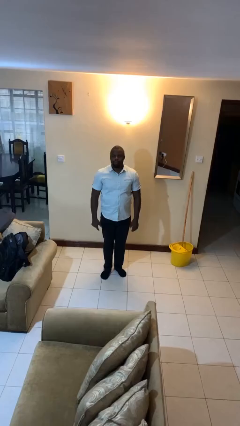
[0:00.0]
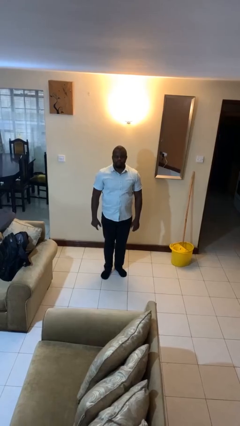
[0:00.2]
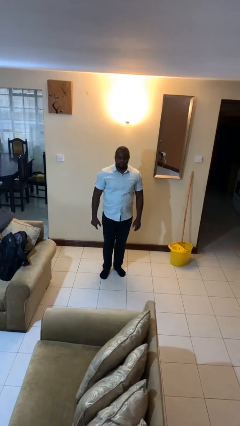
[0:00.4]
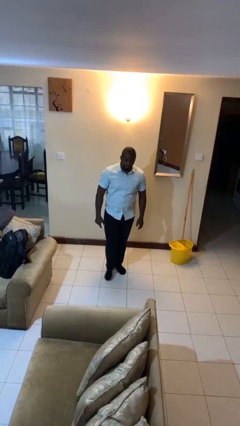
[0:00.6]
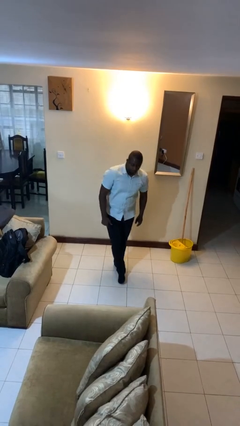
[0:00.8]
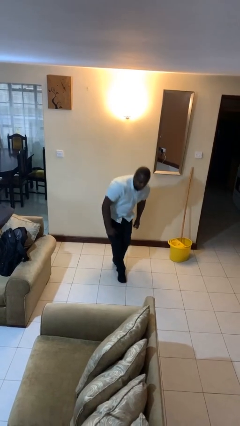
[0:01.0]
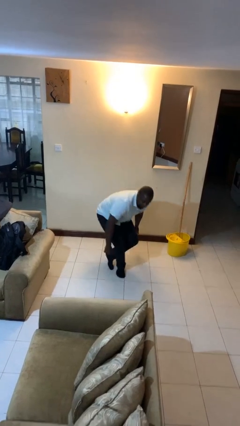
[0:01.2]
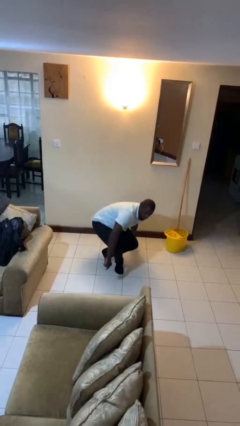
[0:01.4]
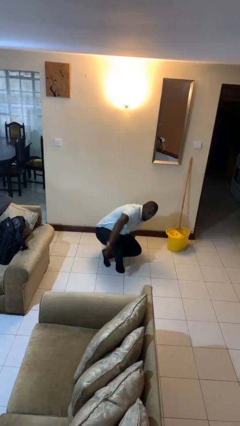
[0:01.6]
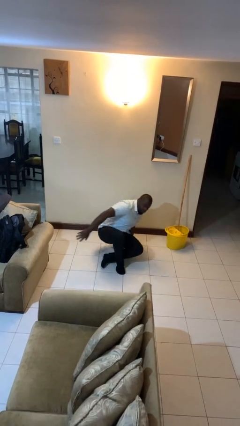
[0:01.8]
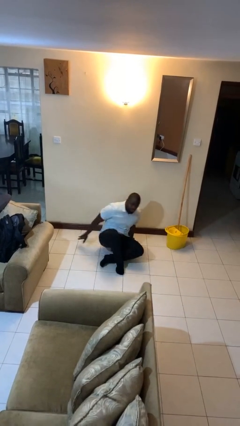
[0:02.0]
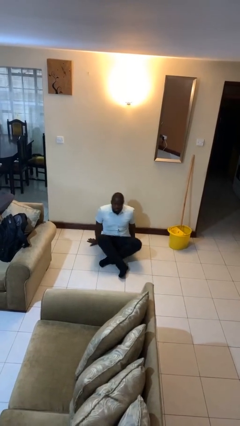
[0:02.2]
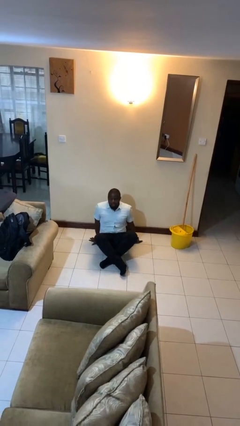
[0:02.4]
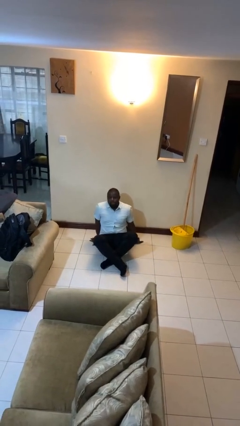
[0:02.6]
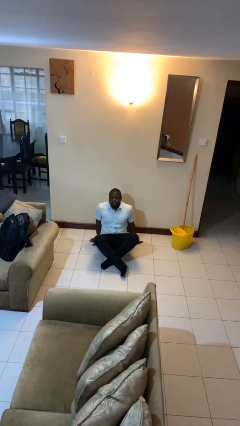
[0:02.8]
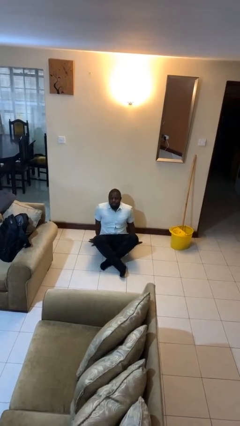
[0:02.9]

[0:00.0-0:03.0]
person sits crisscross

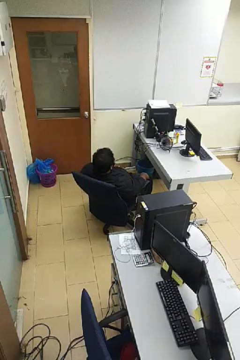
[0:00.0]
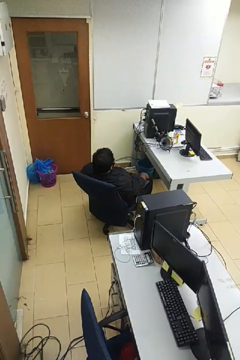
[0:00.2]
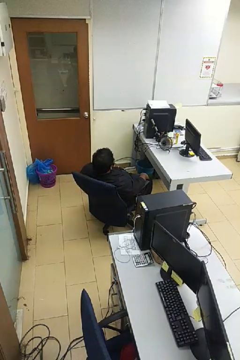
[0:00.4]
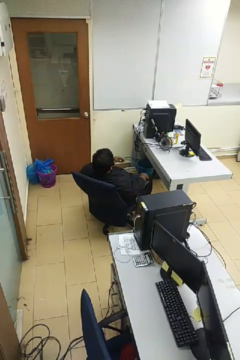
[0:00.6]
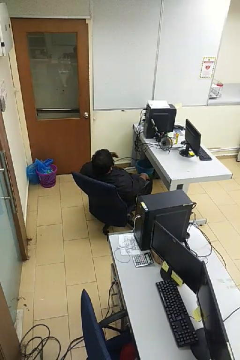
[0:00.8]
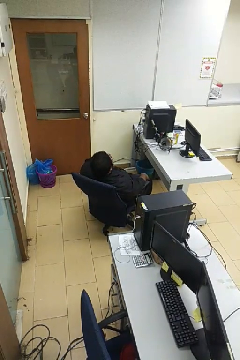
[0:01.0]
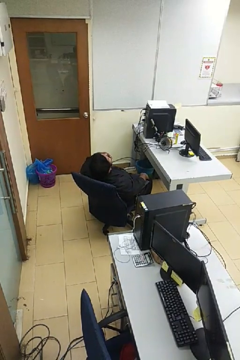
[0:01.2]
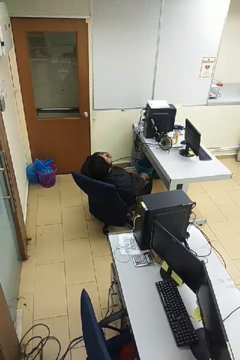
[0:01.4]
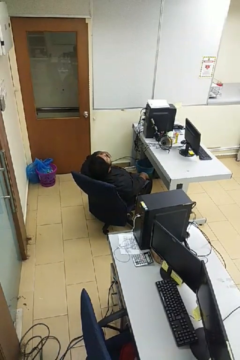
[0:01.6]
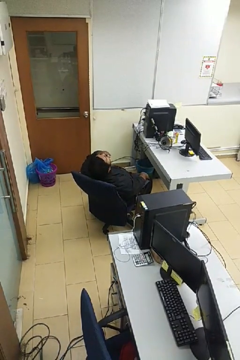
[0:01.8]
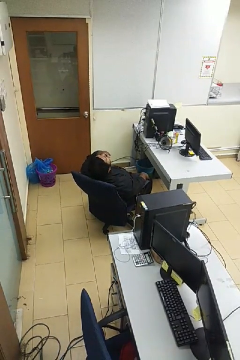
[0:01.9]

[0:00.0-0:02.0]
person yawns

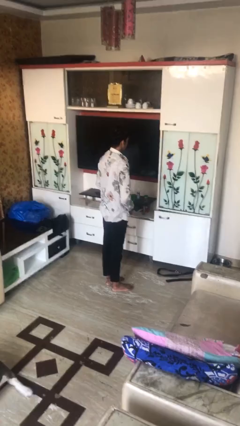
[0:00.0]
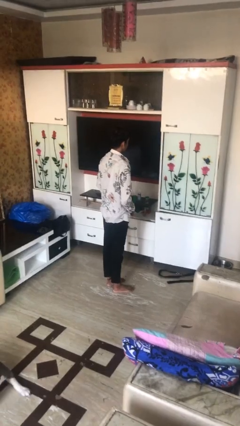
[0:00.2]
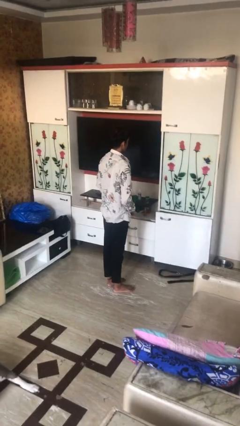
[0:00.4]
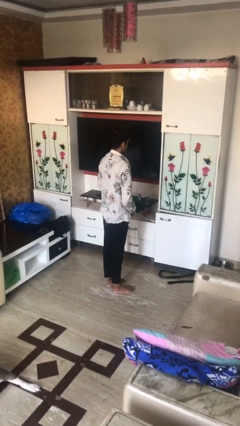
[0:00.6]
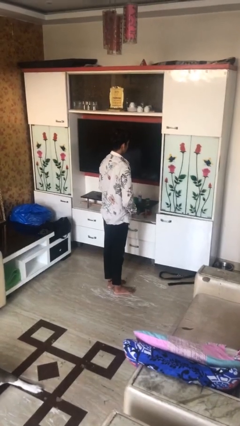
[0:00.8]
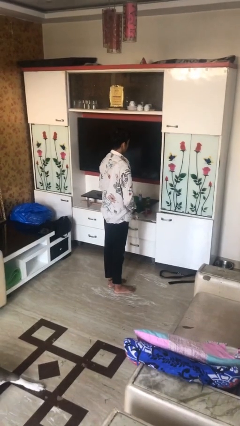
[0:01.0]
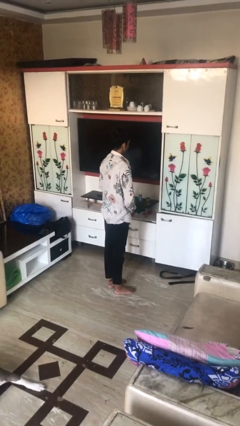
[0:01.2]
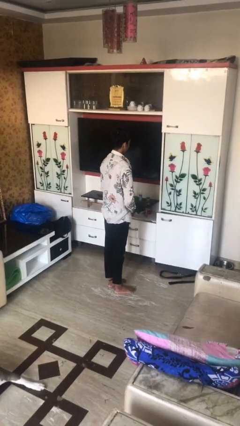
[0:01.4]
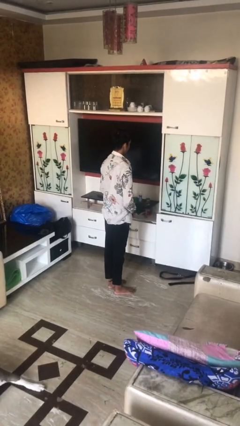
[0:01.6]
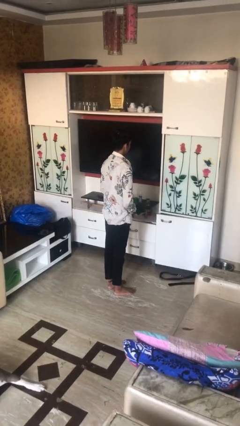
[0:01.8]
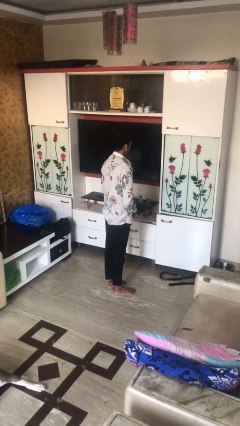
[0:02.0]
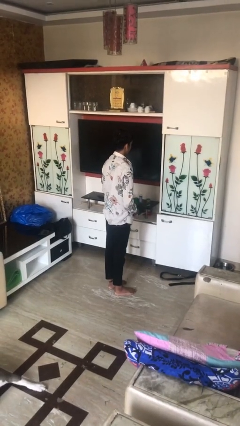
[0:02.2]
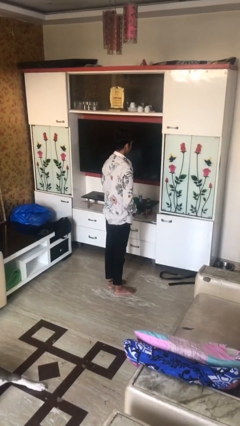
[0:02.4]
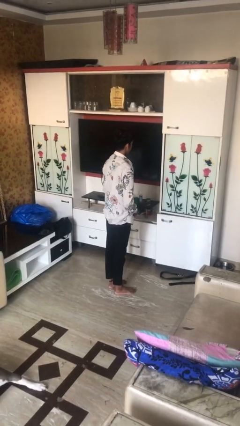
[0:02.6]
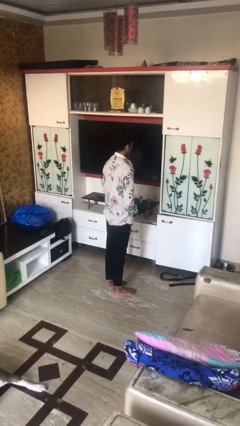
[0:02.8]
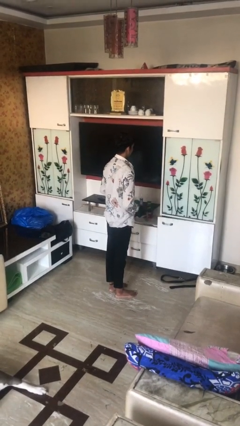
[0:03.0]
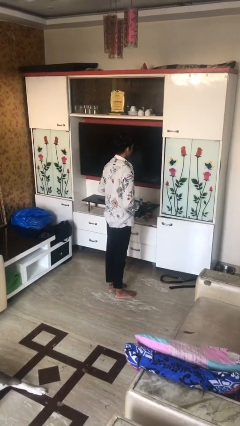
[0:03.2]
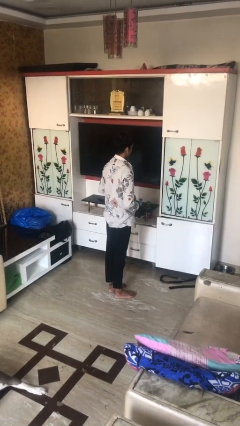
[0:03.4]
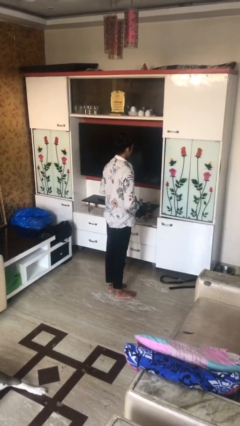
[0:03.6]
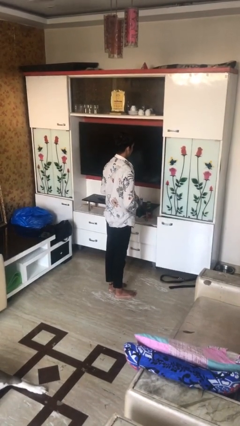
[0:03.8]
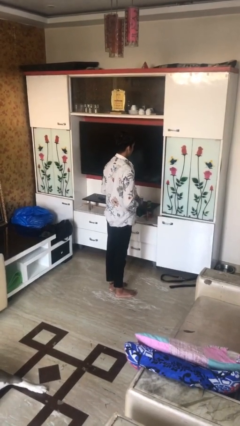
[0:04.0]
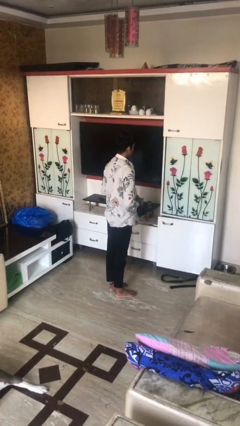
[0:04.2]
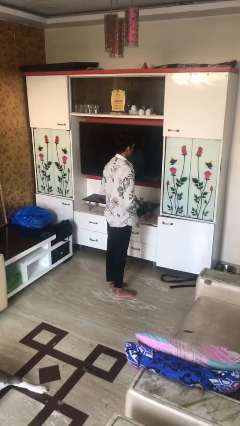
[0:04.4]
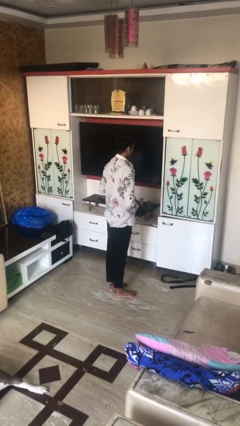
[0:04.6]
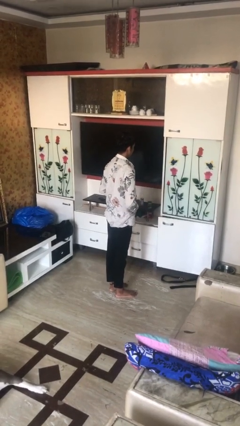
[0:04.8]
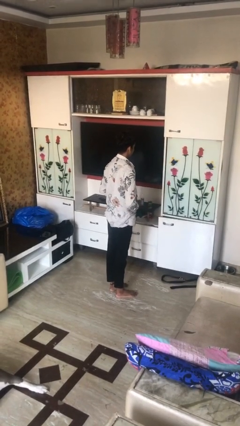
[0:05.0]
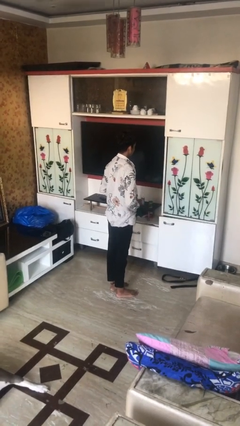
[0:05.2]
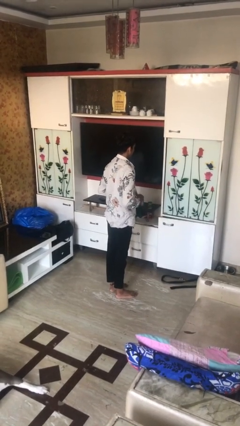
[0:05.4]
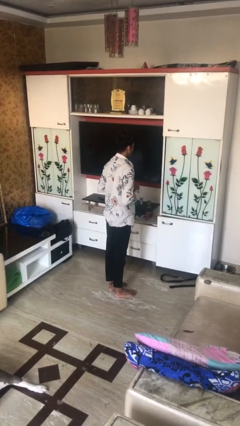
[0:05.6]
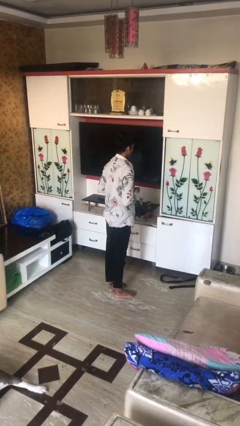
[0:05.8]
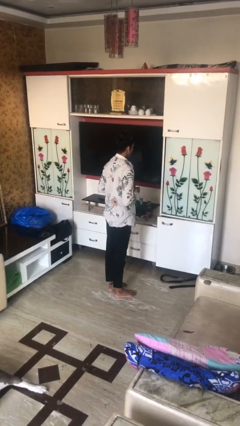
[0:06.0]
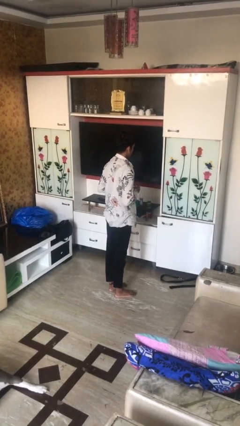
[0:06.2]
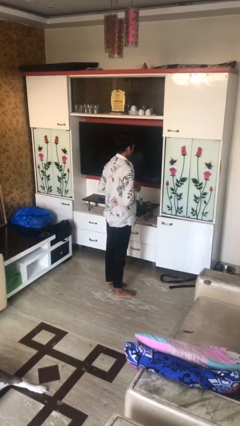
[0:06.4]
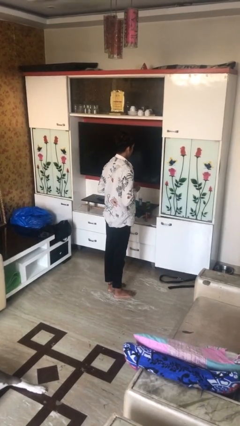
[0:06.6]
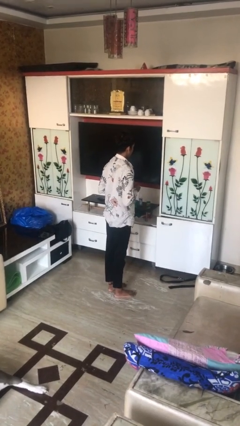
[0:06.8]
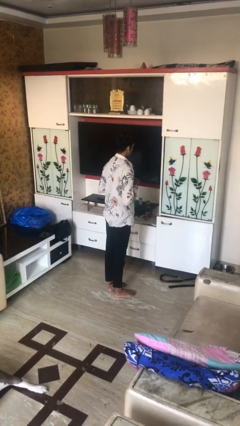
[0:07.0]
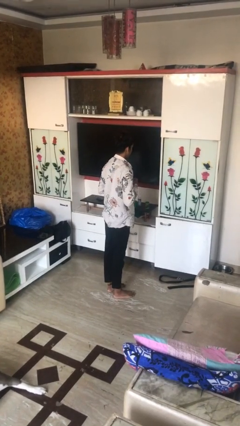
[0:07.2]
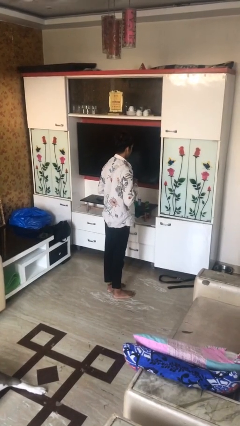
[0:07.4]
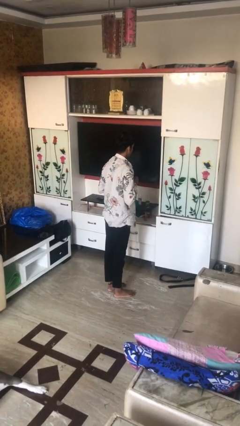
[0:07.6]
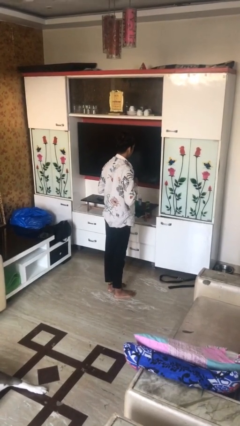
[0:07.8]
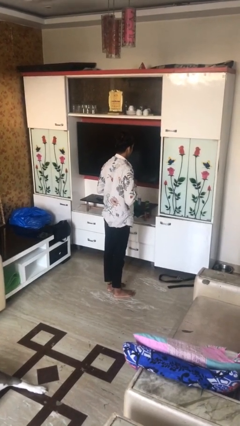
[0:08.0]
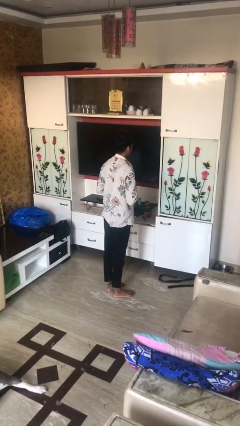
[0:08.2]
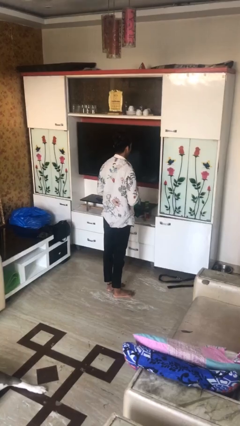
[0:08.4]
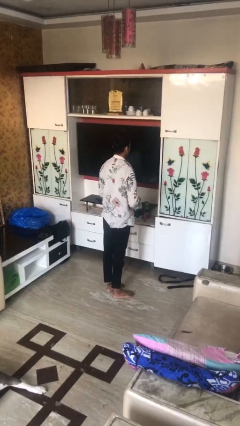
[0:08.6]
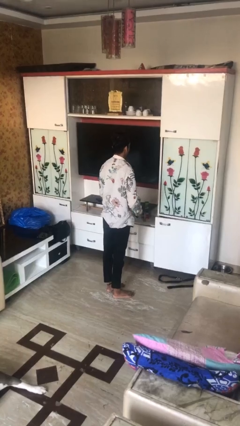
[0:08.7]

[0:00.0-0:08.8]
person buttons shirt

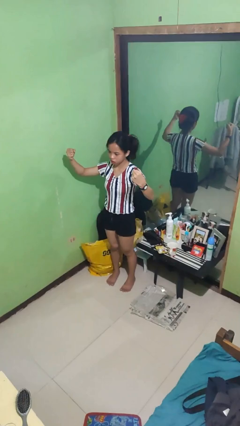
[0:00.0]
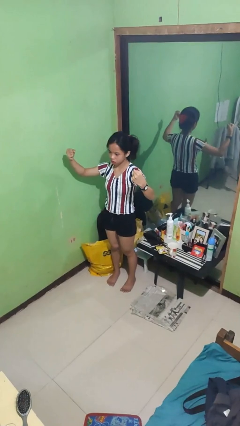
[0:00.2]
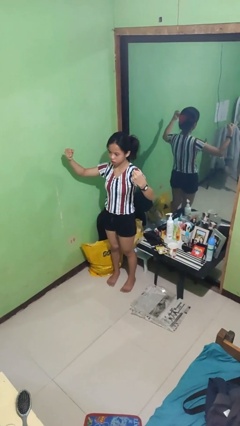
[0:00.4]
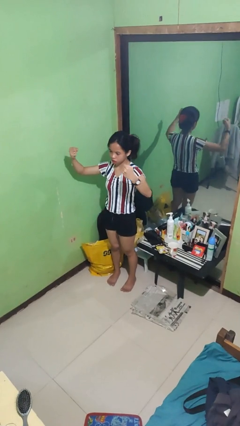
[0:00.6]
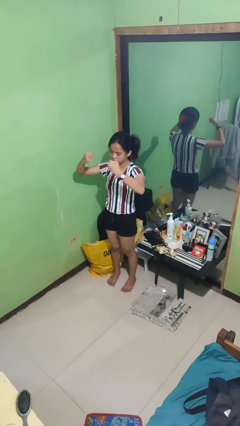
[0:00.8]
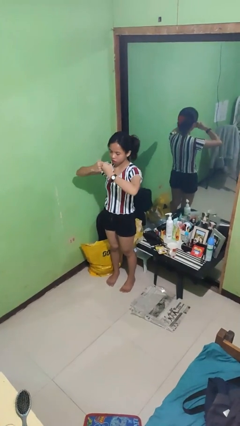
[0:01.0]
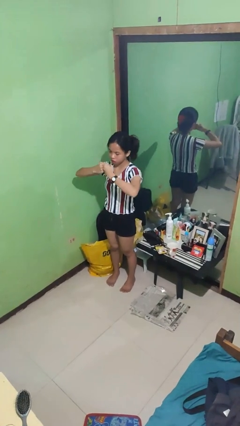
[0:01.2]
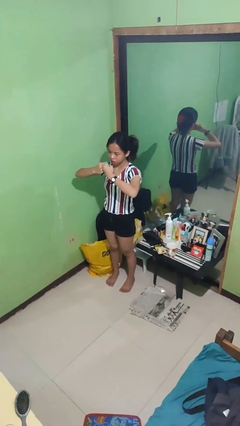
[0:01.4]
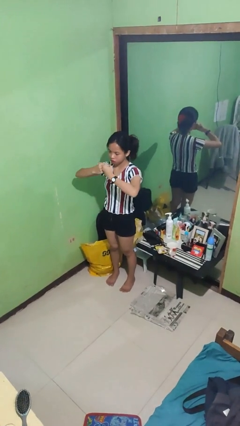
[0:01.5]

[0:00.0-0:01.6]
person gestures zoom out

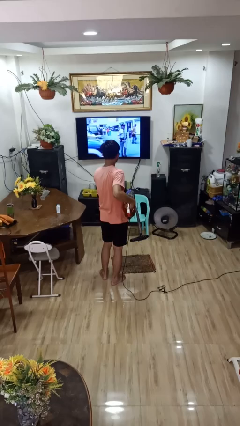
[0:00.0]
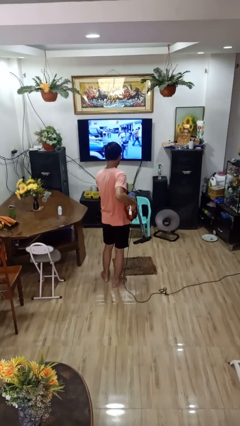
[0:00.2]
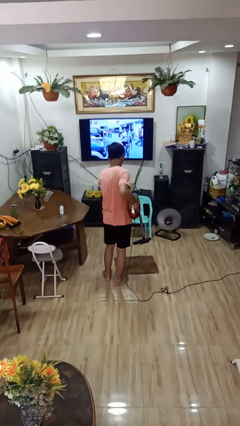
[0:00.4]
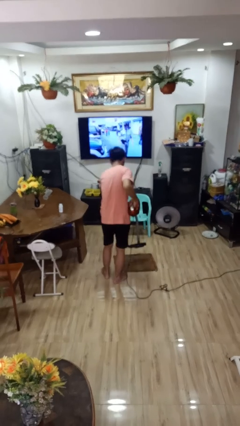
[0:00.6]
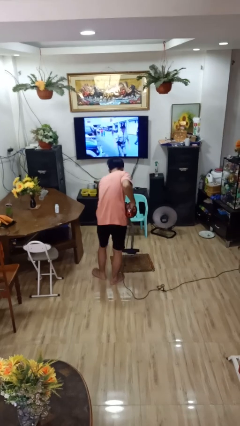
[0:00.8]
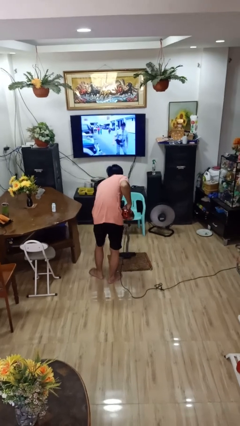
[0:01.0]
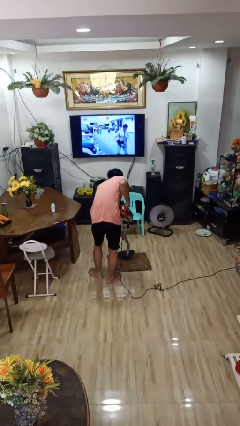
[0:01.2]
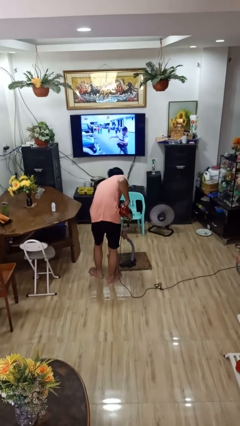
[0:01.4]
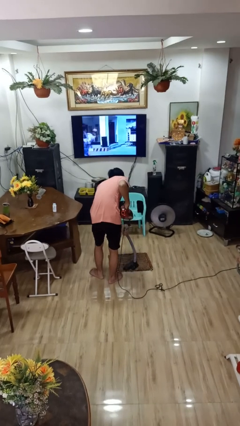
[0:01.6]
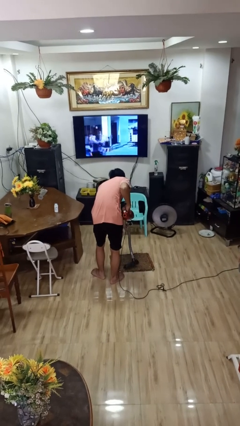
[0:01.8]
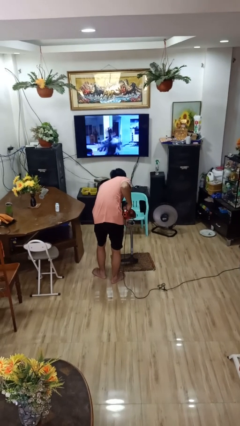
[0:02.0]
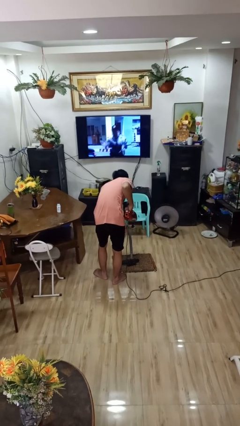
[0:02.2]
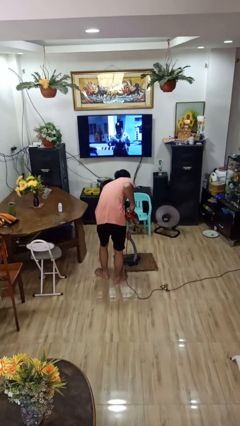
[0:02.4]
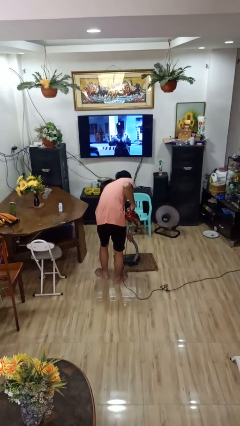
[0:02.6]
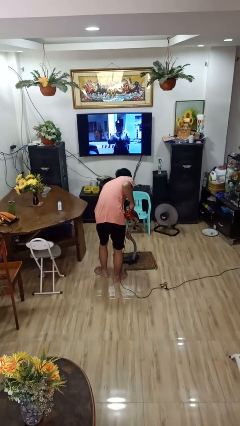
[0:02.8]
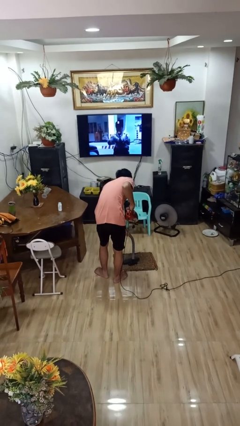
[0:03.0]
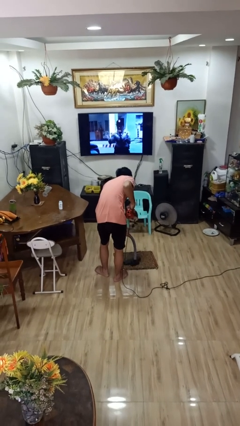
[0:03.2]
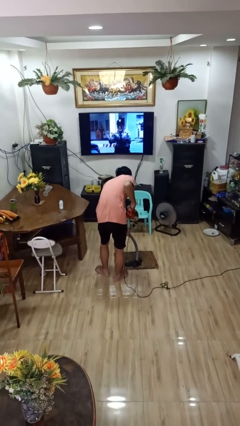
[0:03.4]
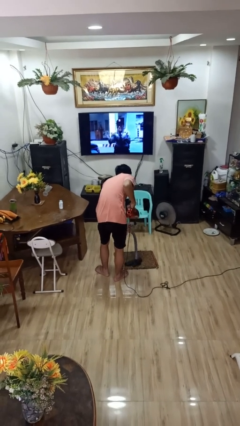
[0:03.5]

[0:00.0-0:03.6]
person vacuums carpet
